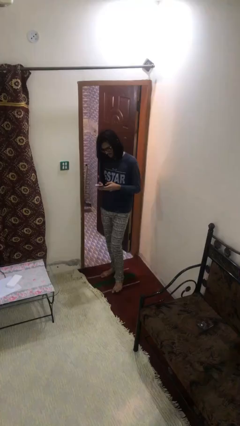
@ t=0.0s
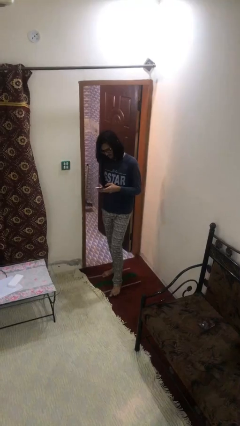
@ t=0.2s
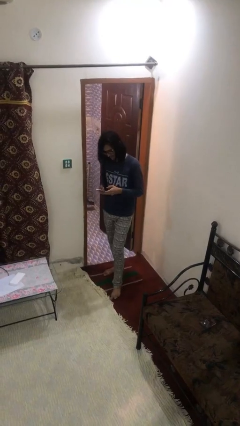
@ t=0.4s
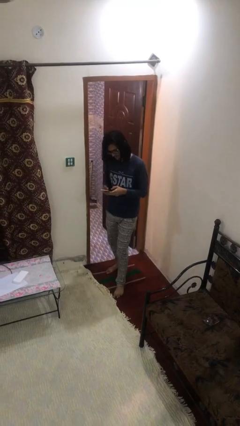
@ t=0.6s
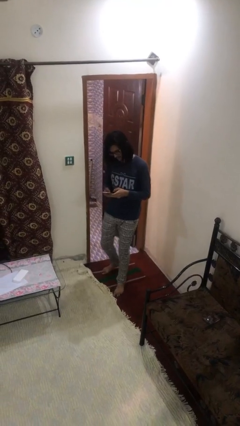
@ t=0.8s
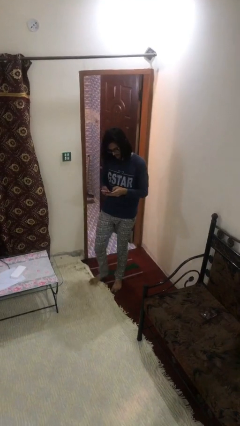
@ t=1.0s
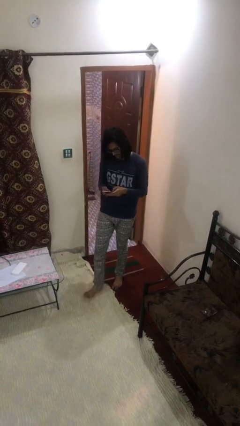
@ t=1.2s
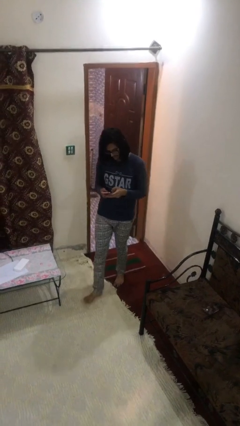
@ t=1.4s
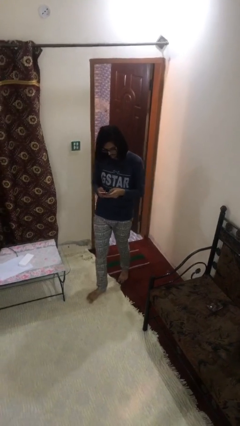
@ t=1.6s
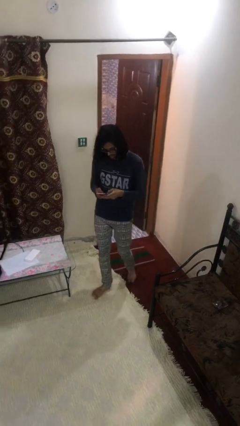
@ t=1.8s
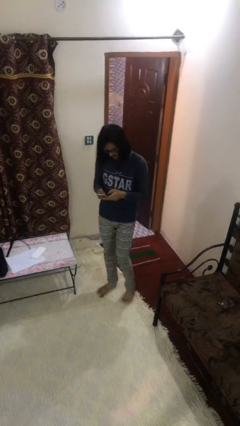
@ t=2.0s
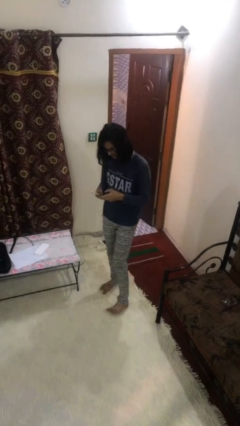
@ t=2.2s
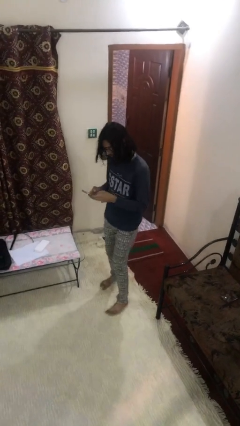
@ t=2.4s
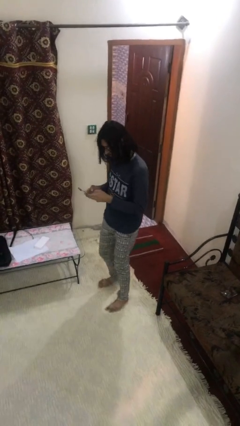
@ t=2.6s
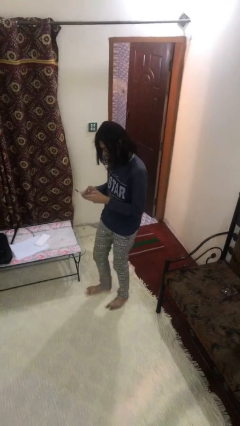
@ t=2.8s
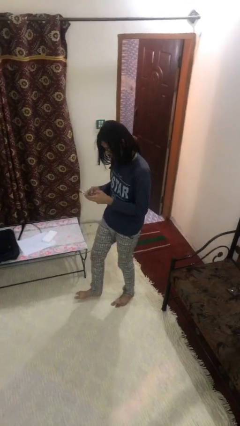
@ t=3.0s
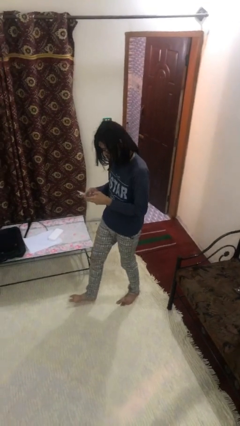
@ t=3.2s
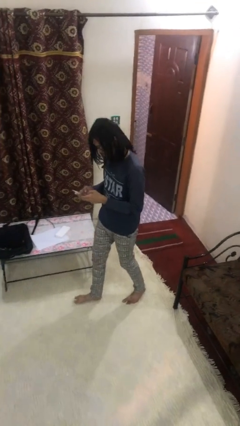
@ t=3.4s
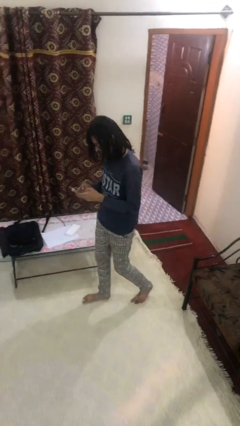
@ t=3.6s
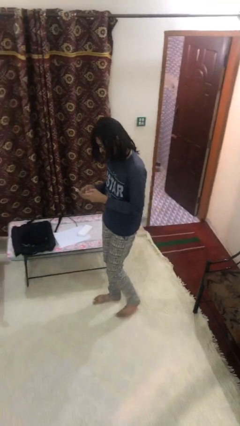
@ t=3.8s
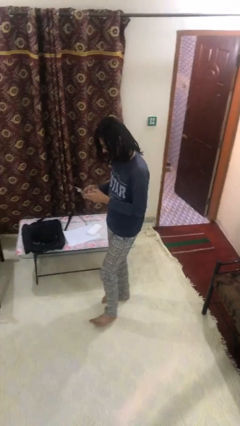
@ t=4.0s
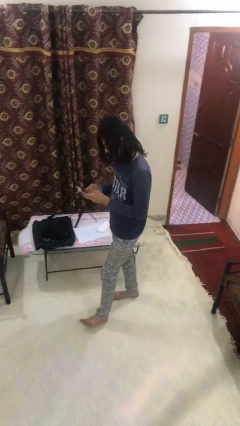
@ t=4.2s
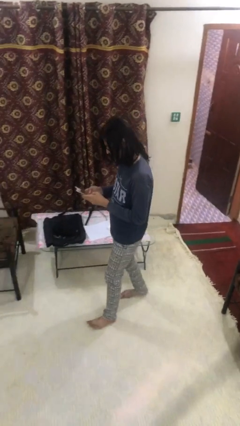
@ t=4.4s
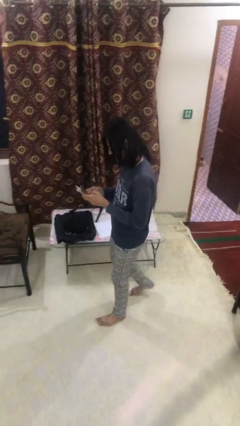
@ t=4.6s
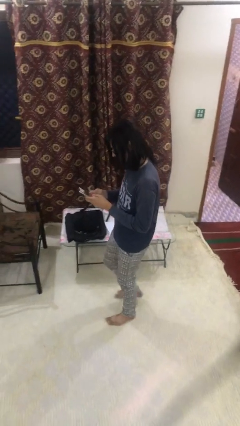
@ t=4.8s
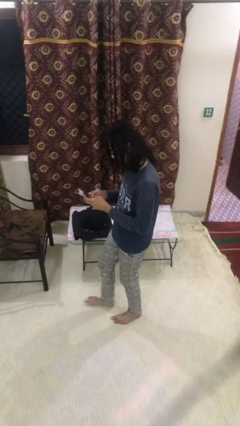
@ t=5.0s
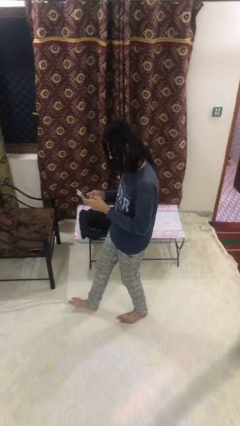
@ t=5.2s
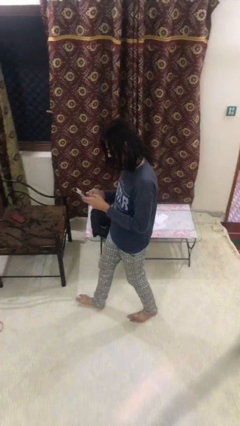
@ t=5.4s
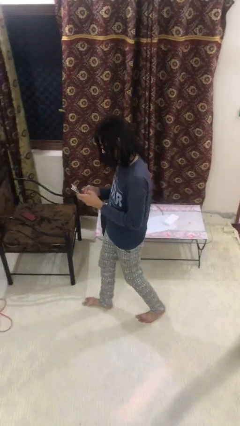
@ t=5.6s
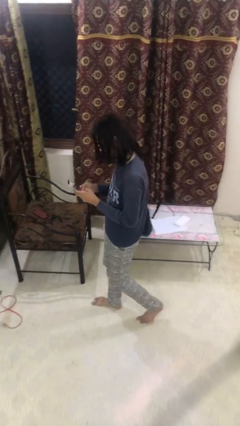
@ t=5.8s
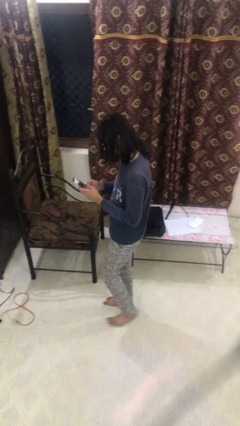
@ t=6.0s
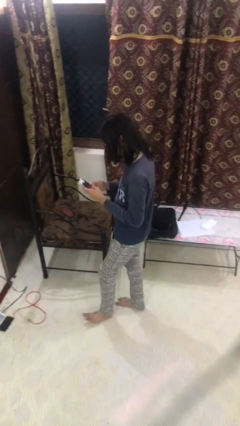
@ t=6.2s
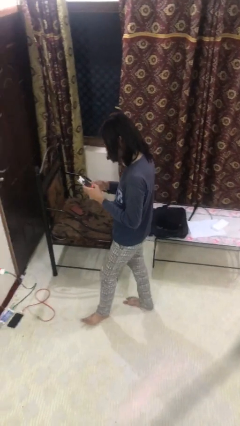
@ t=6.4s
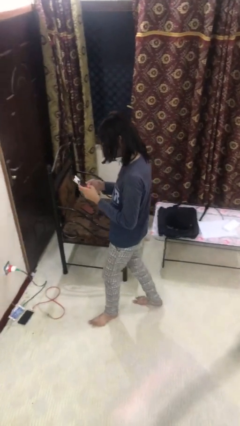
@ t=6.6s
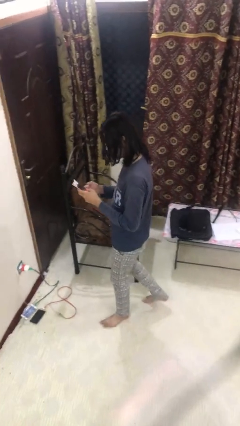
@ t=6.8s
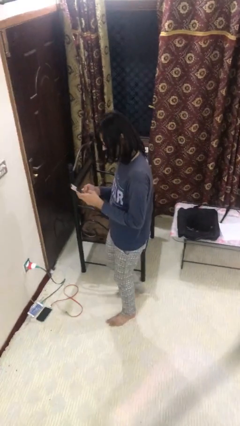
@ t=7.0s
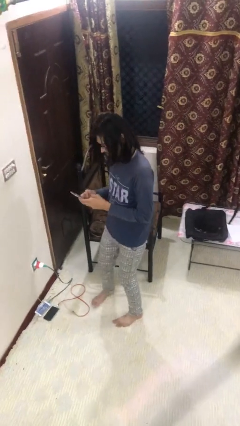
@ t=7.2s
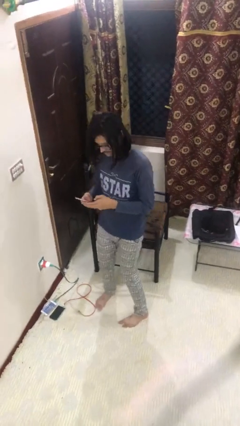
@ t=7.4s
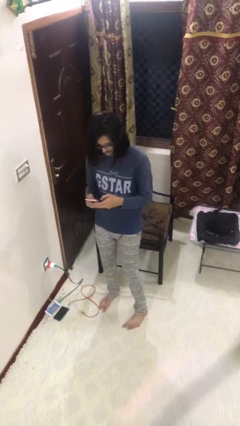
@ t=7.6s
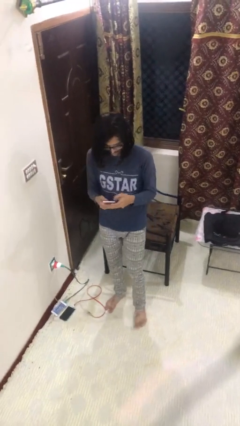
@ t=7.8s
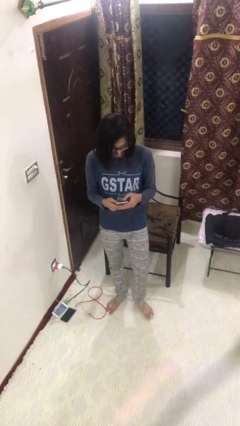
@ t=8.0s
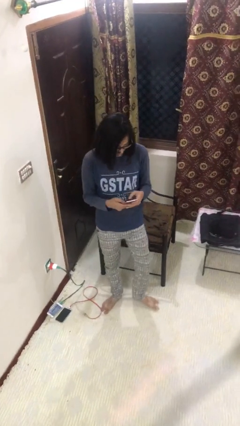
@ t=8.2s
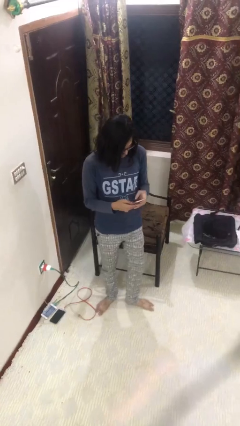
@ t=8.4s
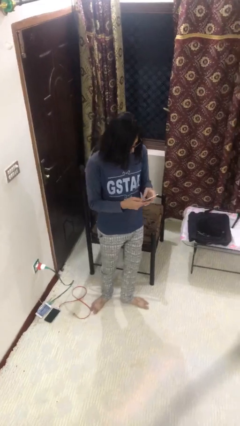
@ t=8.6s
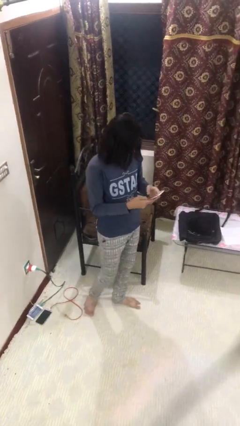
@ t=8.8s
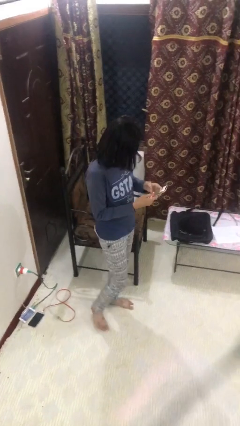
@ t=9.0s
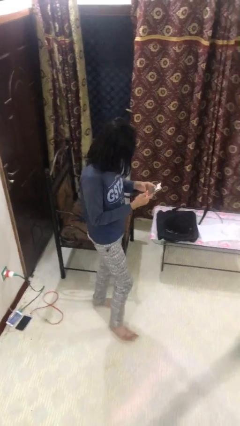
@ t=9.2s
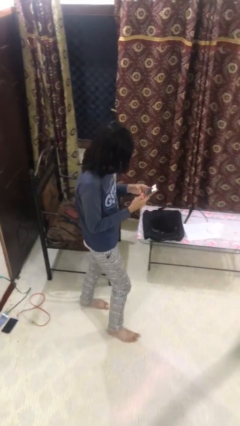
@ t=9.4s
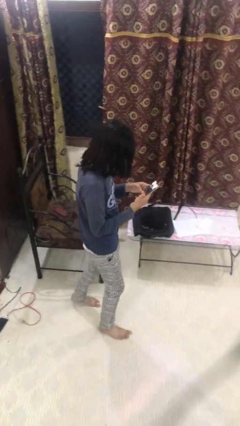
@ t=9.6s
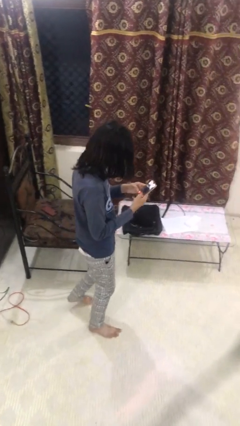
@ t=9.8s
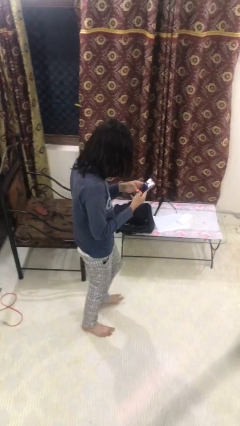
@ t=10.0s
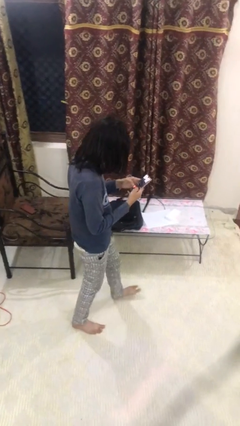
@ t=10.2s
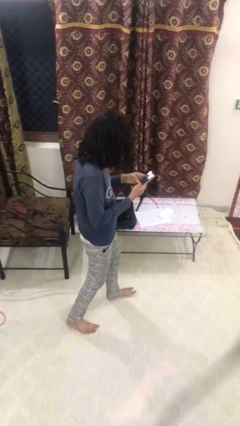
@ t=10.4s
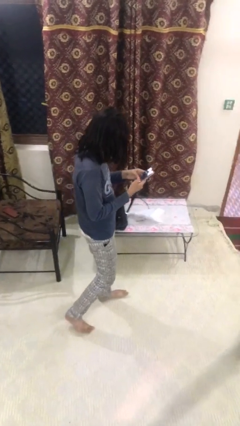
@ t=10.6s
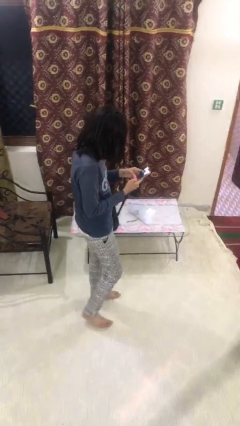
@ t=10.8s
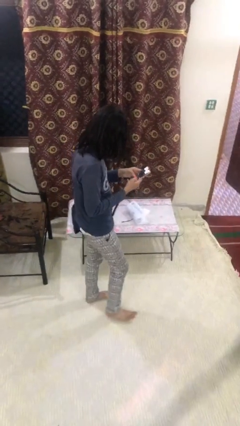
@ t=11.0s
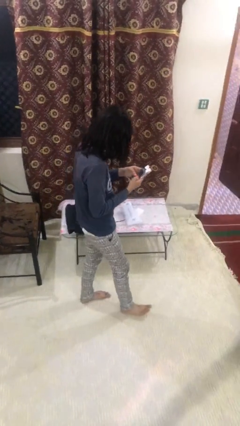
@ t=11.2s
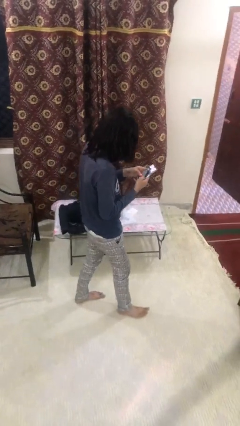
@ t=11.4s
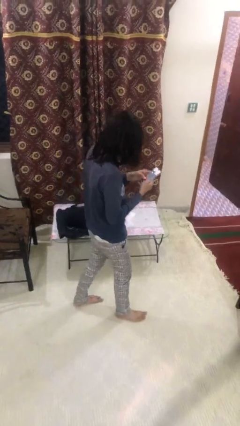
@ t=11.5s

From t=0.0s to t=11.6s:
person texts on phone

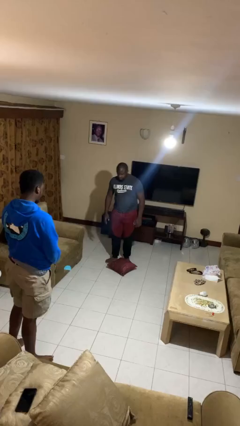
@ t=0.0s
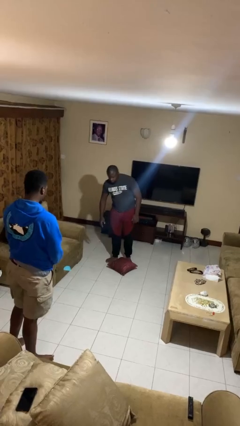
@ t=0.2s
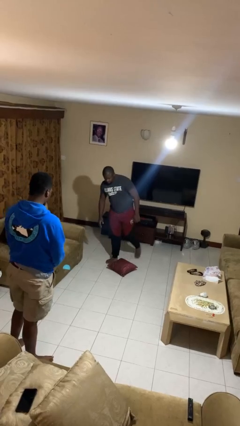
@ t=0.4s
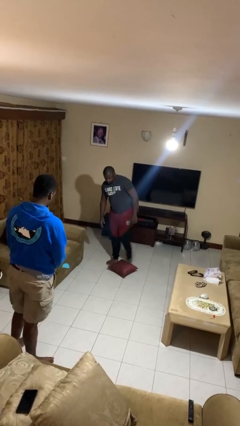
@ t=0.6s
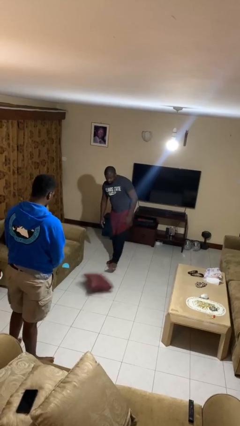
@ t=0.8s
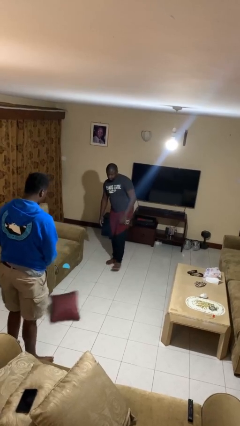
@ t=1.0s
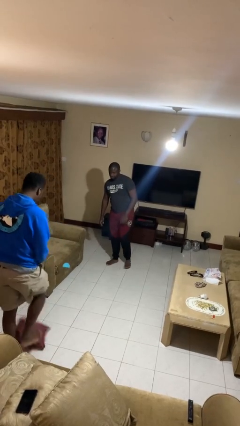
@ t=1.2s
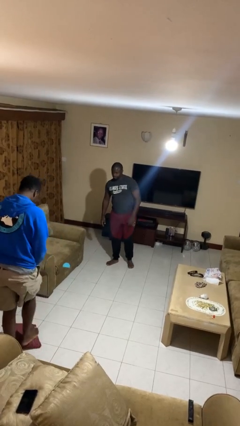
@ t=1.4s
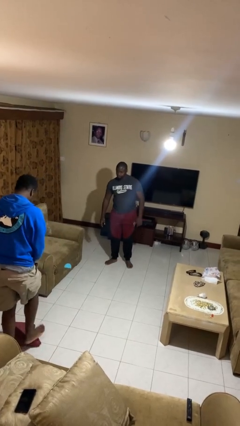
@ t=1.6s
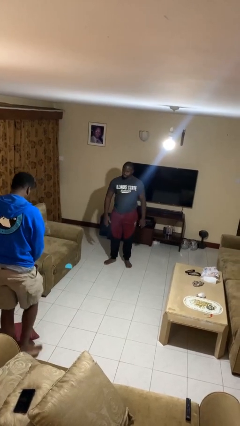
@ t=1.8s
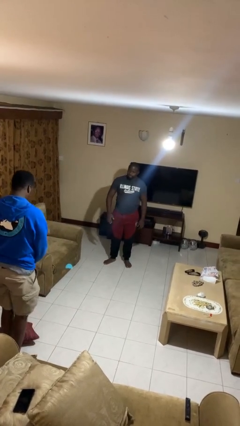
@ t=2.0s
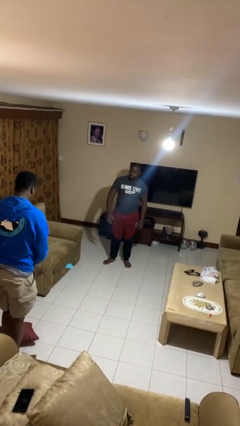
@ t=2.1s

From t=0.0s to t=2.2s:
person kicks object to person

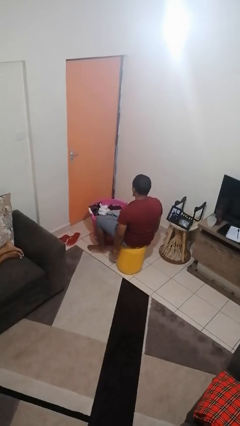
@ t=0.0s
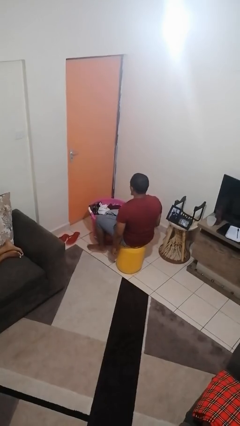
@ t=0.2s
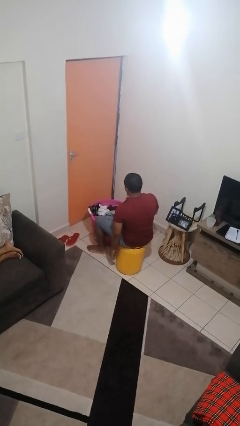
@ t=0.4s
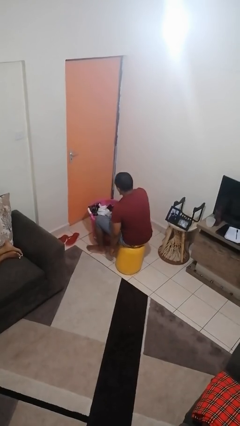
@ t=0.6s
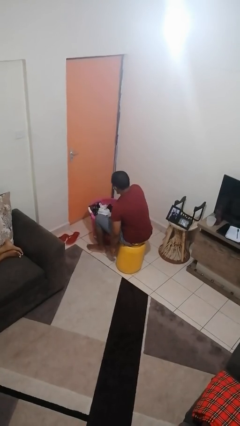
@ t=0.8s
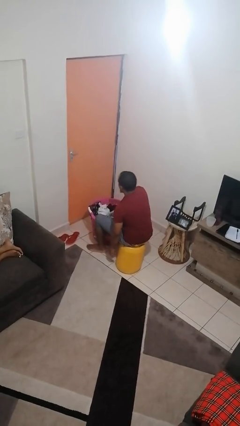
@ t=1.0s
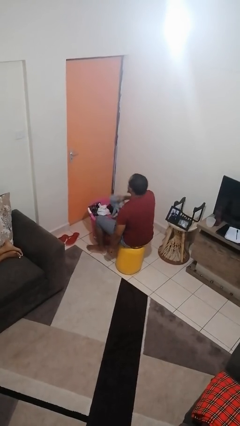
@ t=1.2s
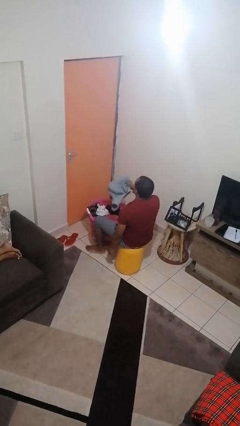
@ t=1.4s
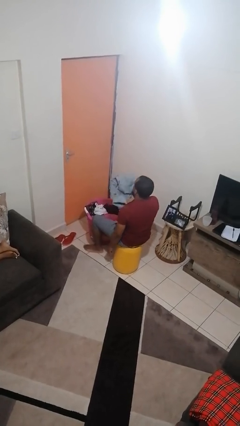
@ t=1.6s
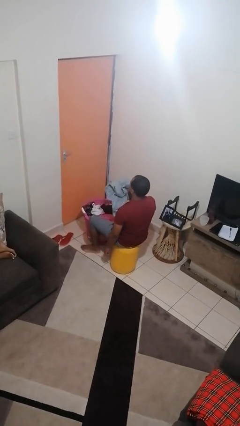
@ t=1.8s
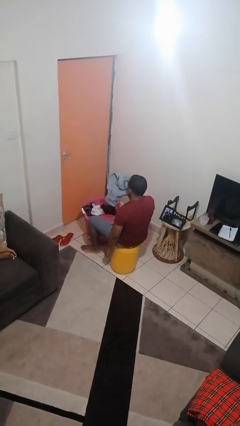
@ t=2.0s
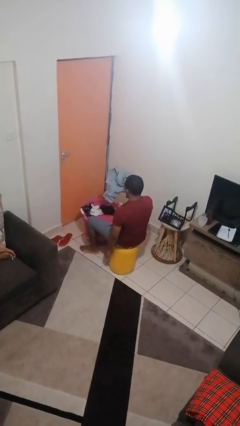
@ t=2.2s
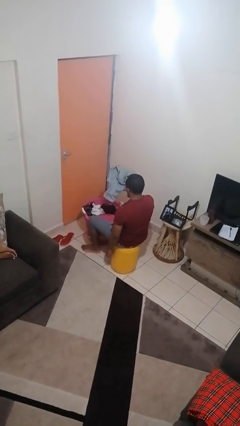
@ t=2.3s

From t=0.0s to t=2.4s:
person takes object from basket

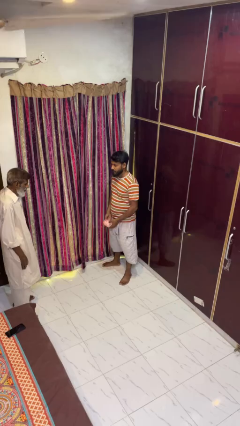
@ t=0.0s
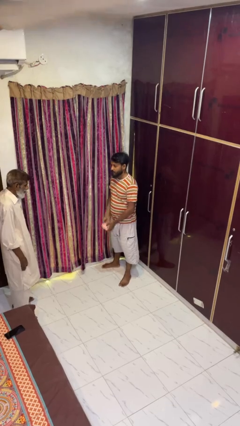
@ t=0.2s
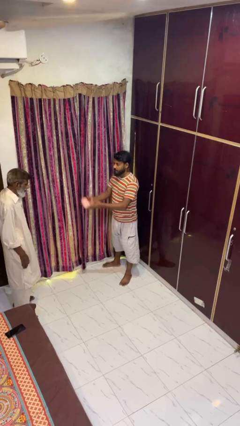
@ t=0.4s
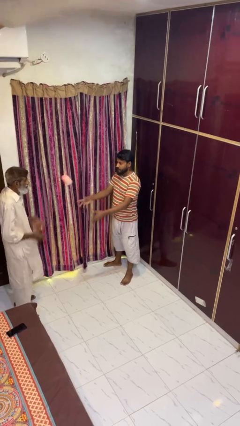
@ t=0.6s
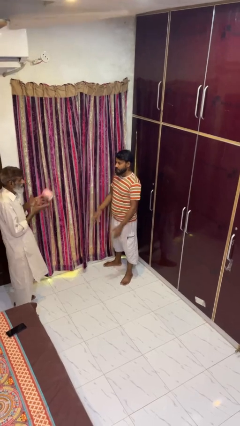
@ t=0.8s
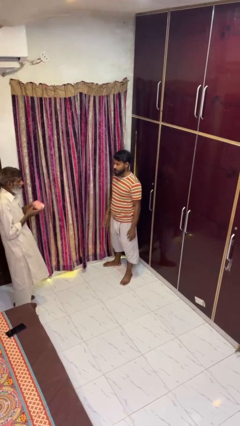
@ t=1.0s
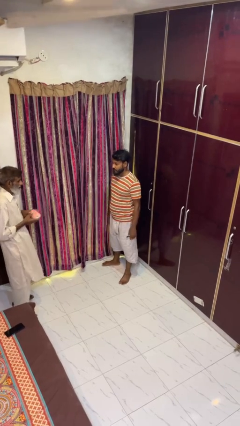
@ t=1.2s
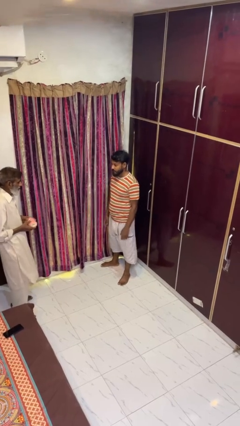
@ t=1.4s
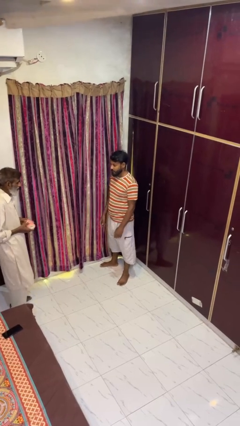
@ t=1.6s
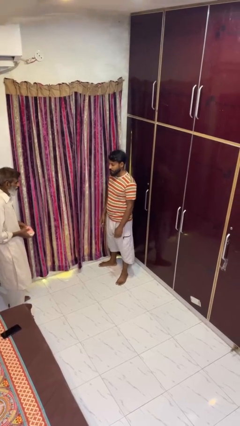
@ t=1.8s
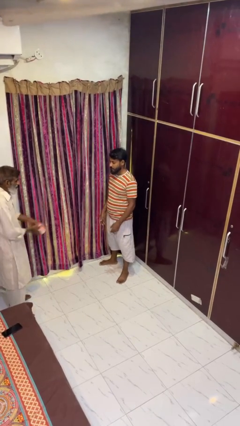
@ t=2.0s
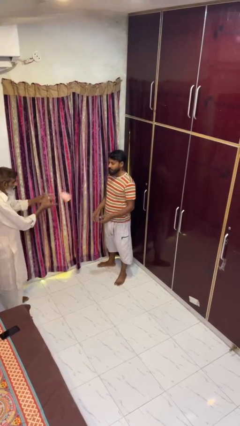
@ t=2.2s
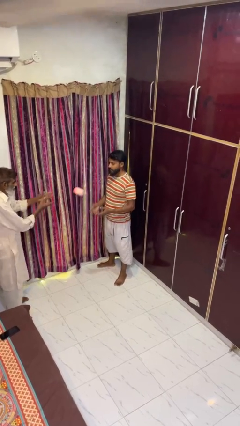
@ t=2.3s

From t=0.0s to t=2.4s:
person throws object to person
